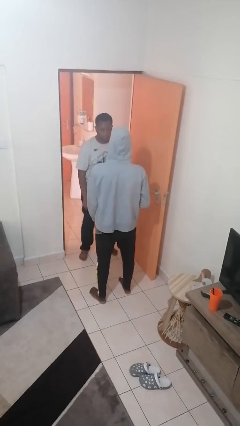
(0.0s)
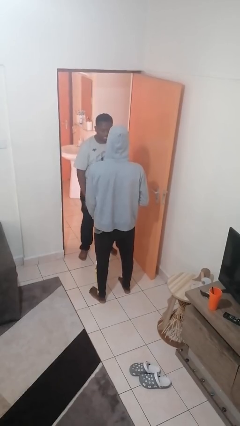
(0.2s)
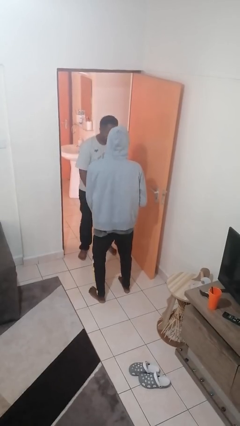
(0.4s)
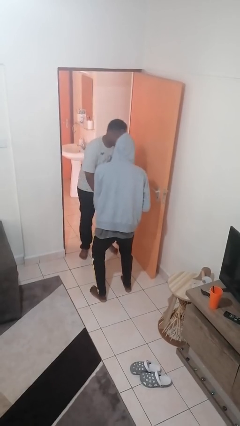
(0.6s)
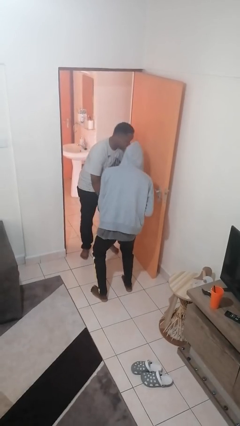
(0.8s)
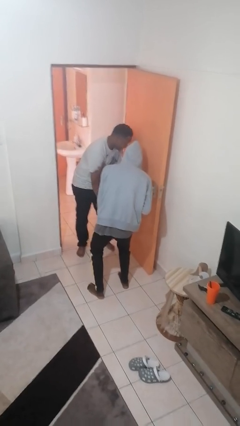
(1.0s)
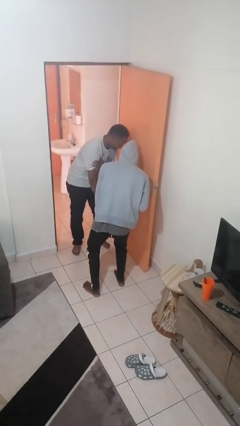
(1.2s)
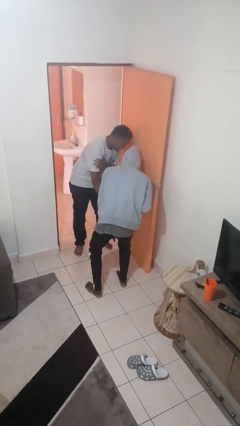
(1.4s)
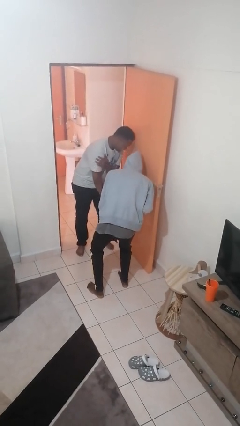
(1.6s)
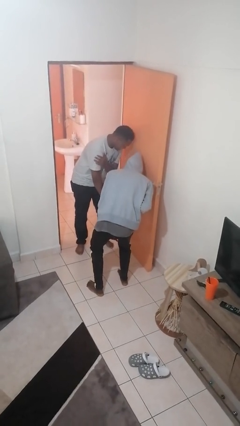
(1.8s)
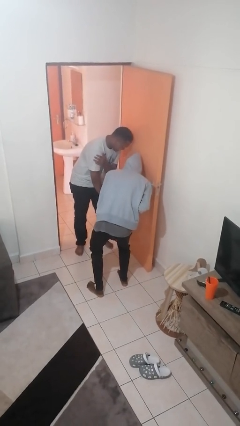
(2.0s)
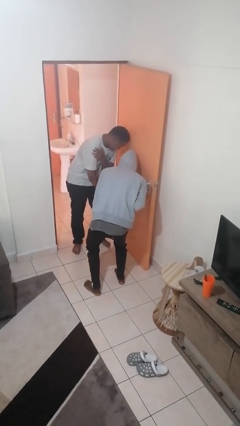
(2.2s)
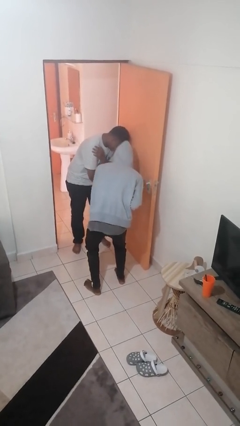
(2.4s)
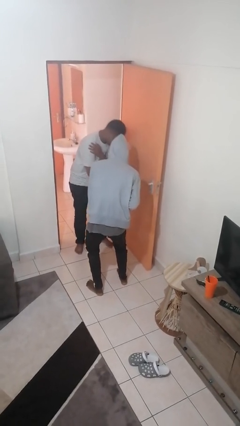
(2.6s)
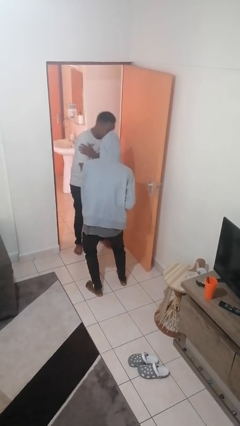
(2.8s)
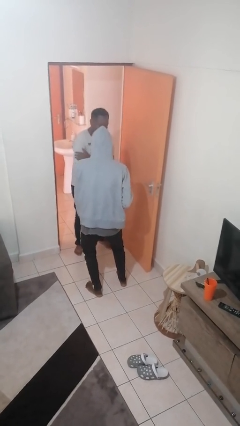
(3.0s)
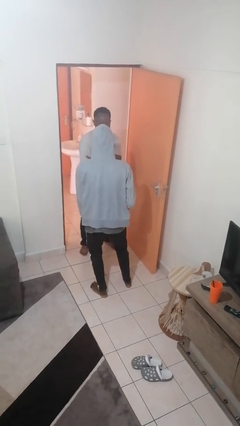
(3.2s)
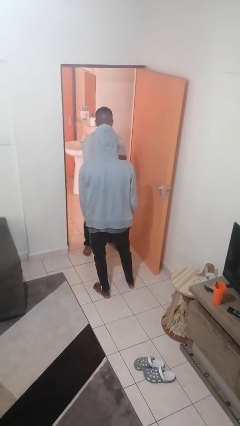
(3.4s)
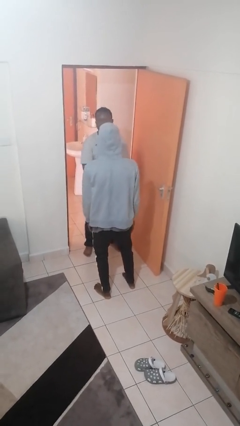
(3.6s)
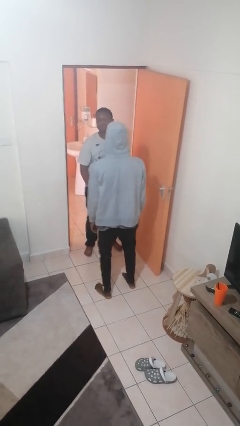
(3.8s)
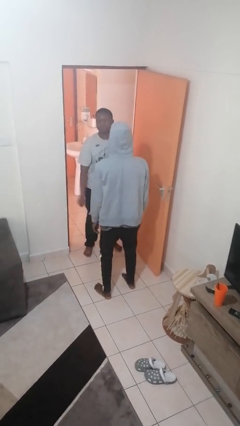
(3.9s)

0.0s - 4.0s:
person laughs with person

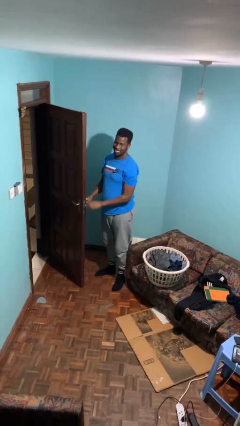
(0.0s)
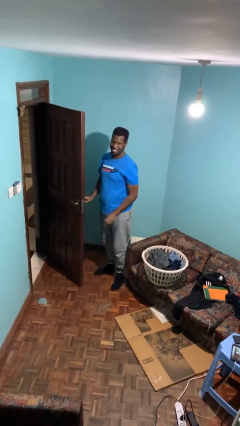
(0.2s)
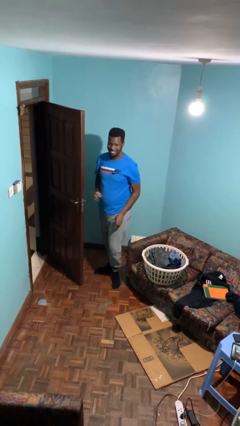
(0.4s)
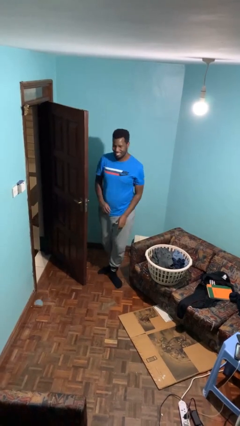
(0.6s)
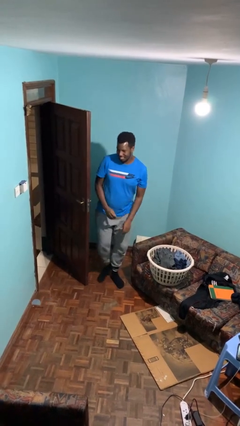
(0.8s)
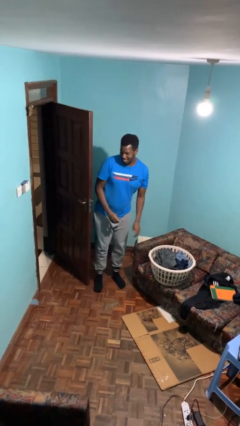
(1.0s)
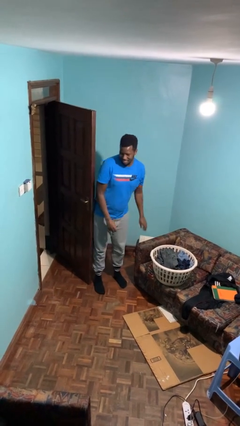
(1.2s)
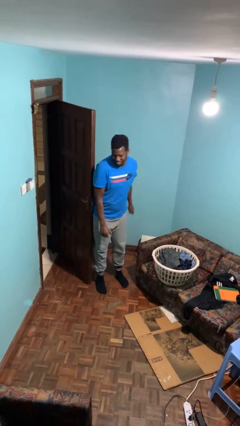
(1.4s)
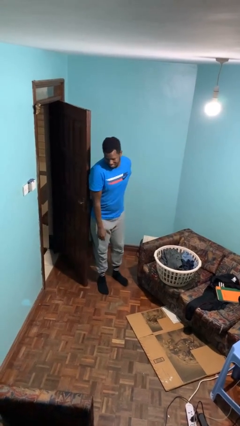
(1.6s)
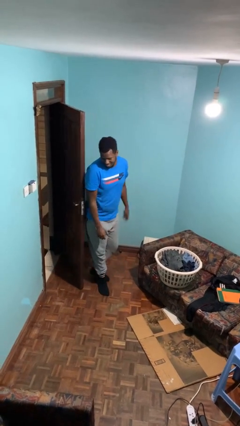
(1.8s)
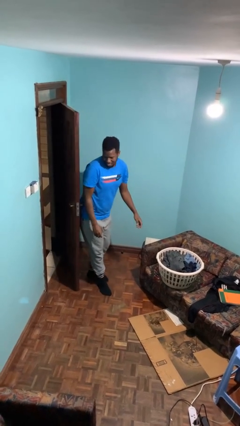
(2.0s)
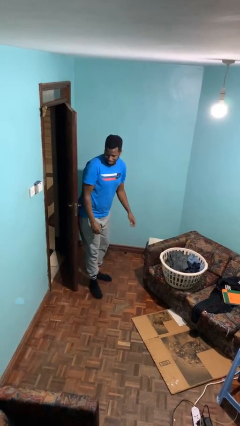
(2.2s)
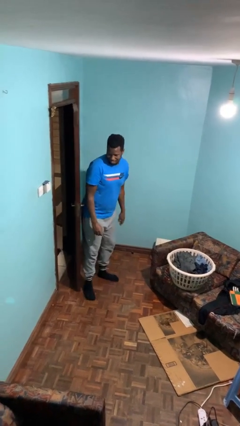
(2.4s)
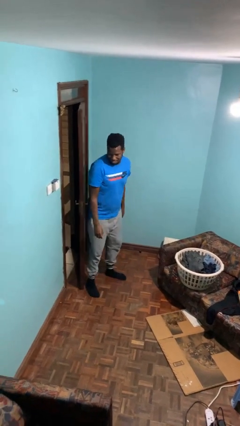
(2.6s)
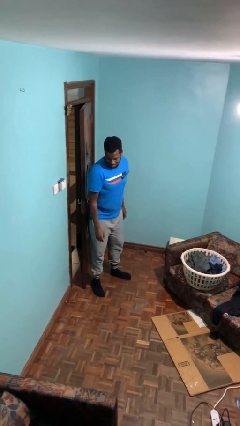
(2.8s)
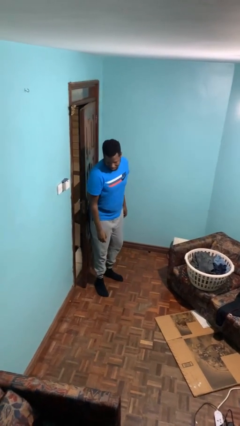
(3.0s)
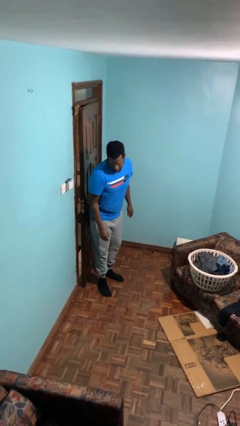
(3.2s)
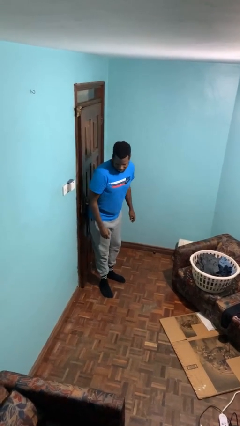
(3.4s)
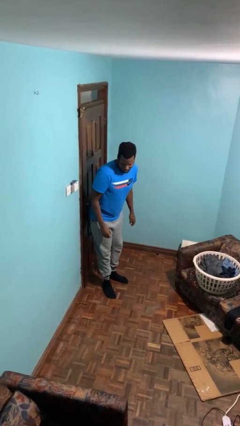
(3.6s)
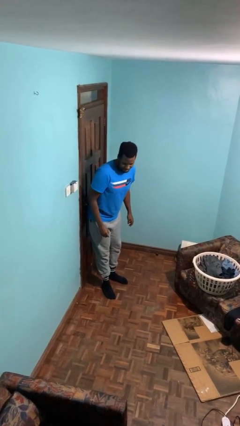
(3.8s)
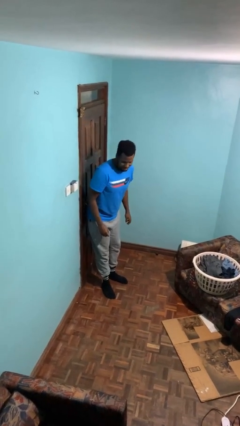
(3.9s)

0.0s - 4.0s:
person closes door with hip

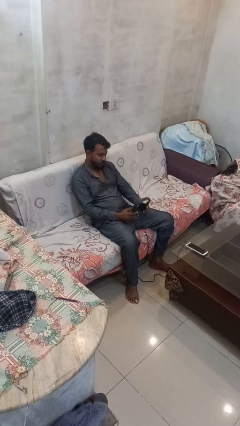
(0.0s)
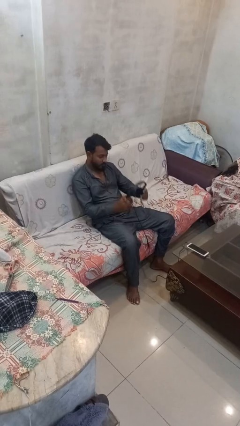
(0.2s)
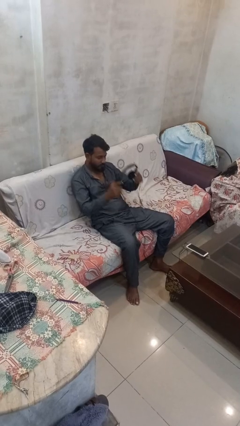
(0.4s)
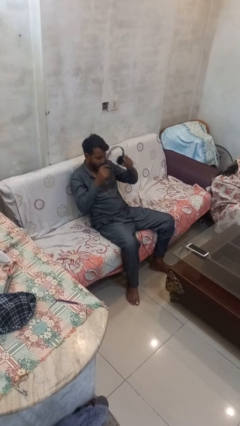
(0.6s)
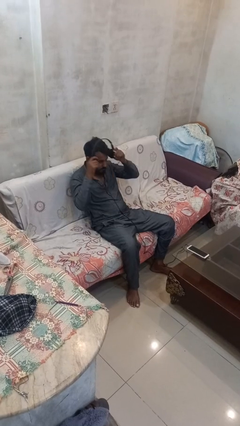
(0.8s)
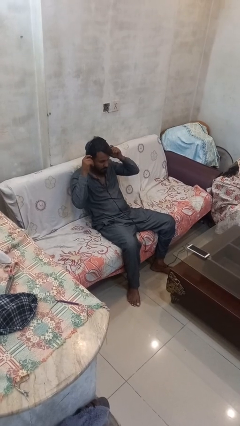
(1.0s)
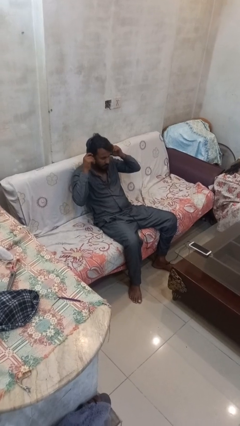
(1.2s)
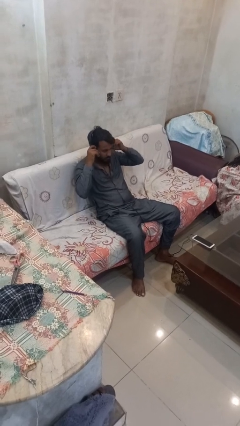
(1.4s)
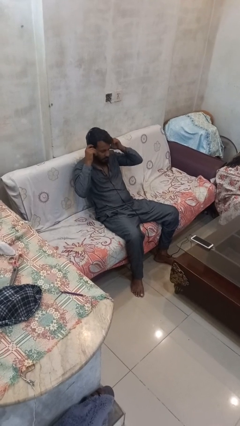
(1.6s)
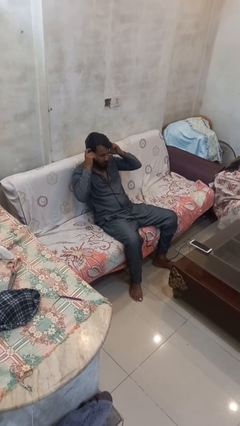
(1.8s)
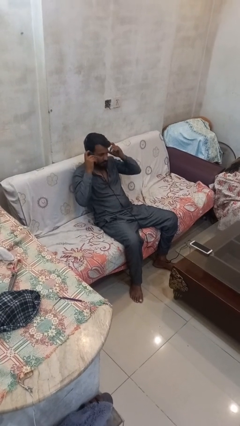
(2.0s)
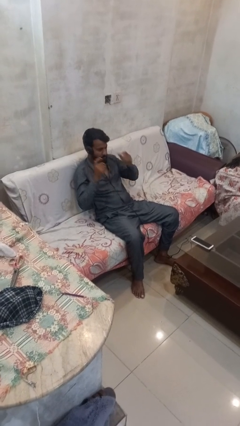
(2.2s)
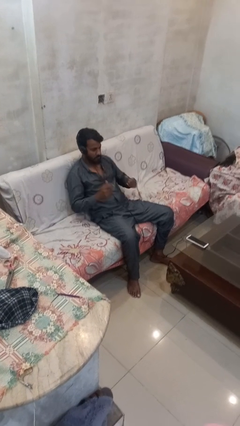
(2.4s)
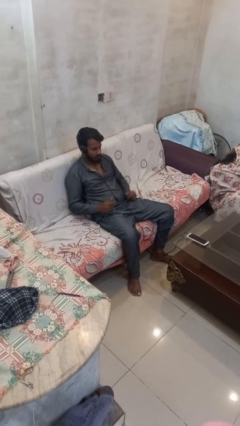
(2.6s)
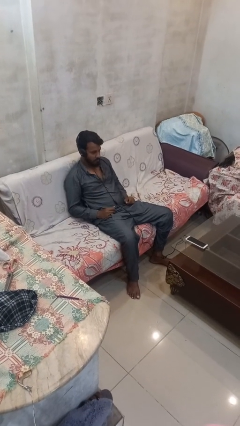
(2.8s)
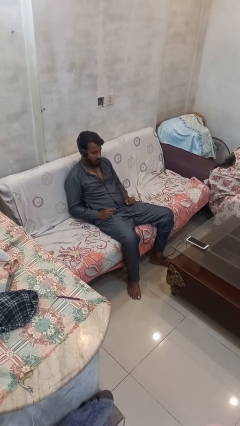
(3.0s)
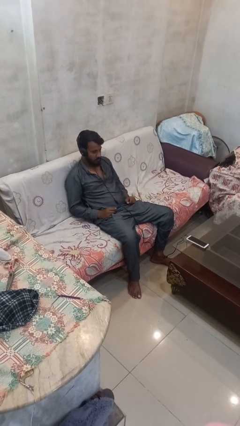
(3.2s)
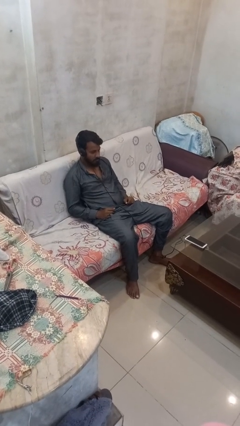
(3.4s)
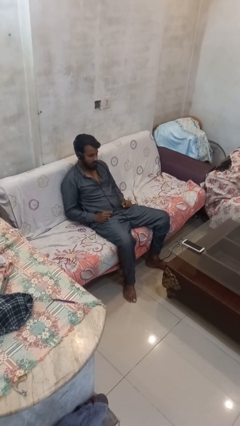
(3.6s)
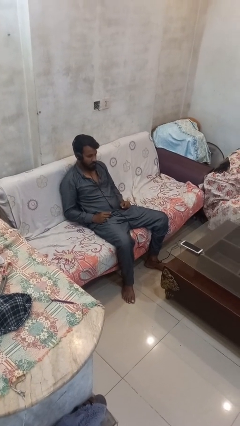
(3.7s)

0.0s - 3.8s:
person puts on headphones

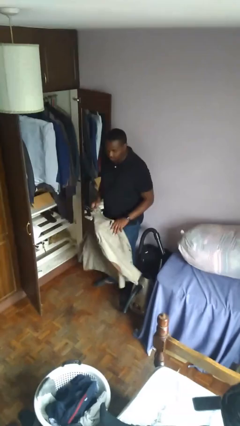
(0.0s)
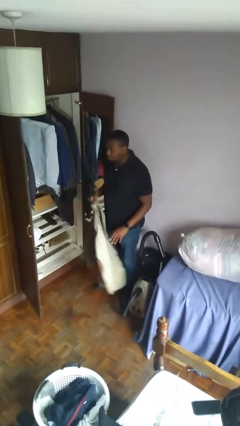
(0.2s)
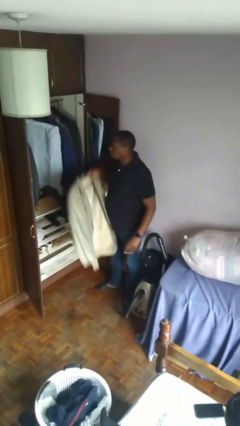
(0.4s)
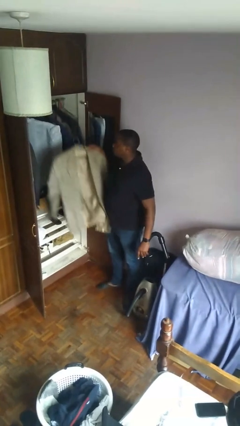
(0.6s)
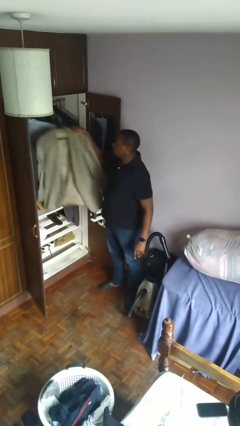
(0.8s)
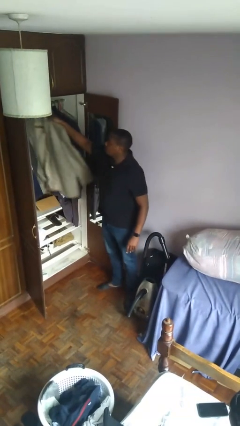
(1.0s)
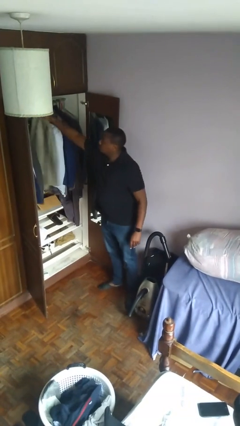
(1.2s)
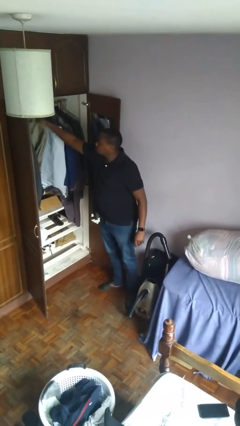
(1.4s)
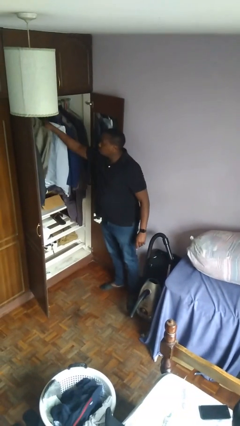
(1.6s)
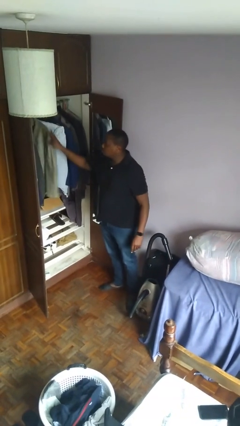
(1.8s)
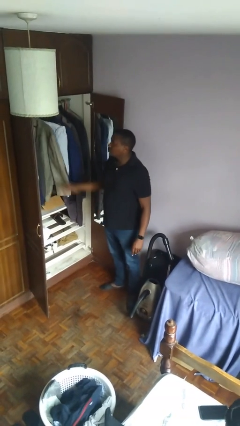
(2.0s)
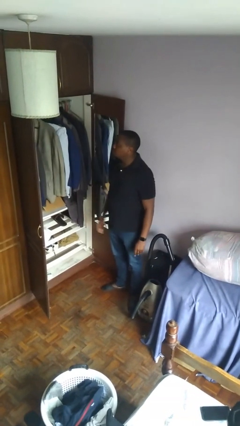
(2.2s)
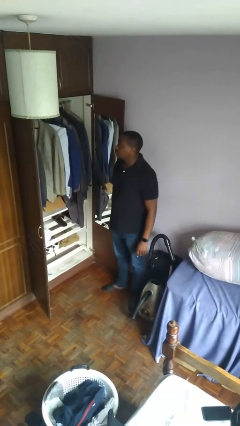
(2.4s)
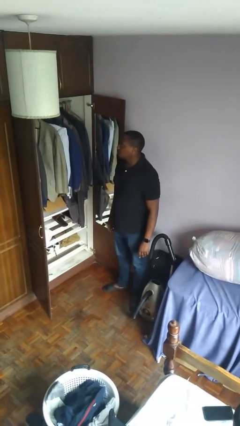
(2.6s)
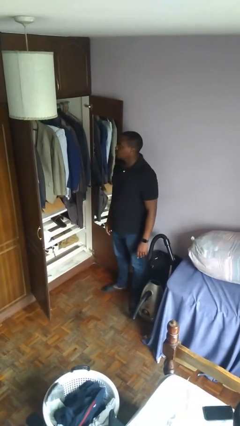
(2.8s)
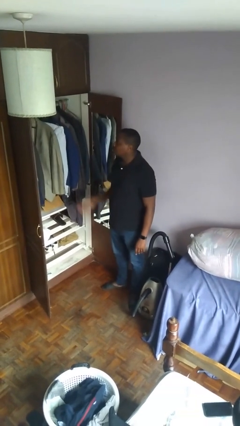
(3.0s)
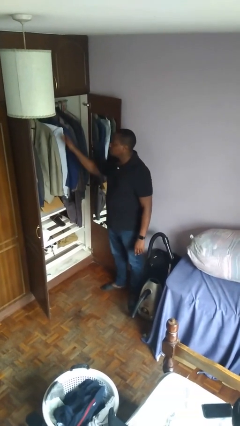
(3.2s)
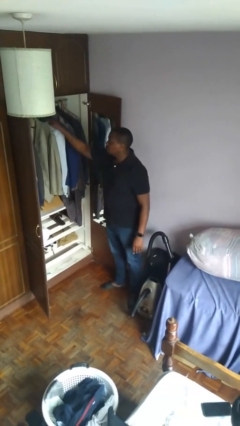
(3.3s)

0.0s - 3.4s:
person puts clothes into closet

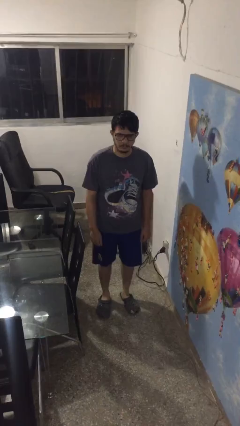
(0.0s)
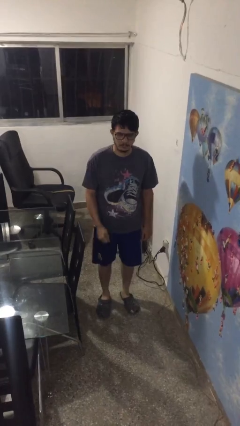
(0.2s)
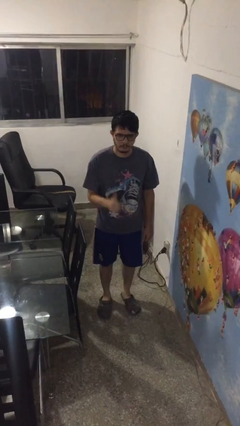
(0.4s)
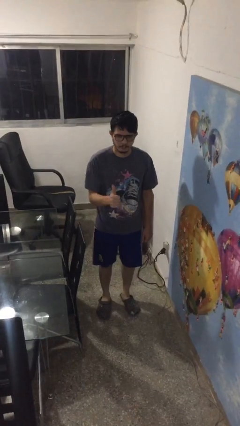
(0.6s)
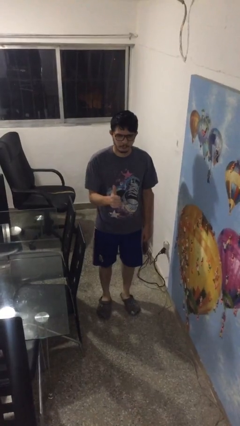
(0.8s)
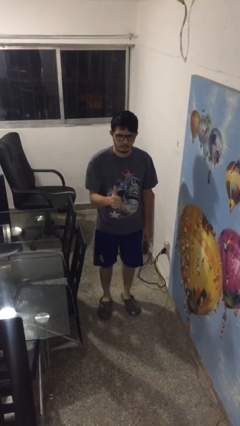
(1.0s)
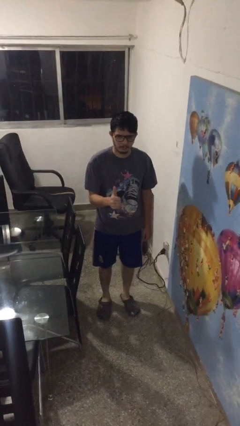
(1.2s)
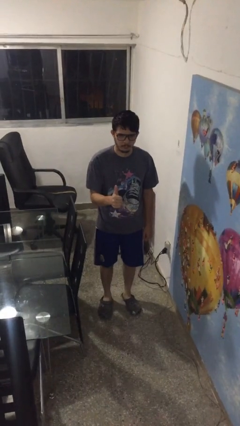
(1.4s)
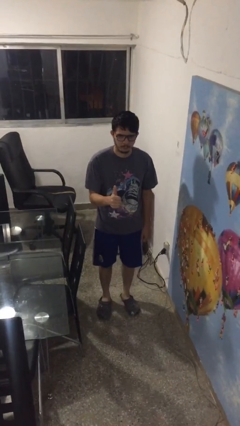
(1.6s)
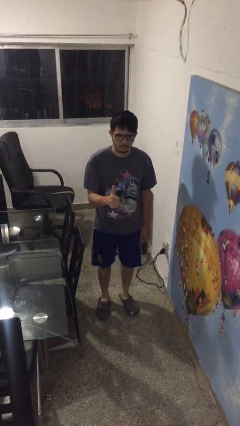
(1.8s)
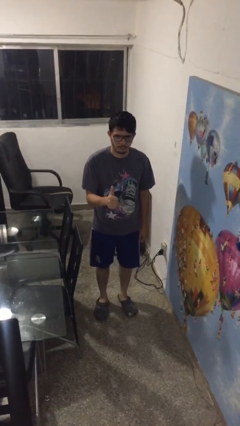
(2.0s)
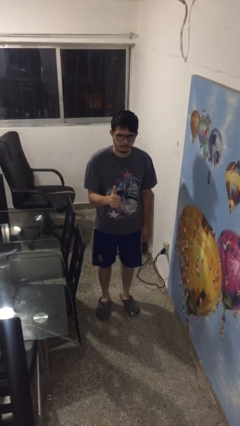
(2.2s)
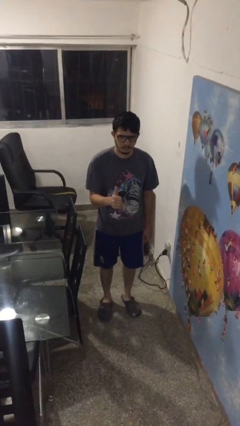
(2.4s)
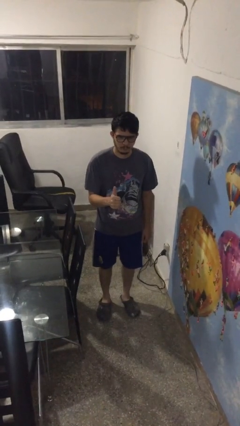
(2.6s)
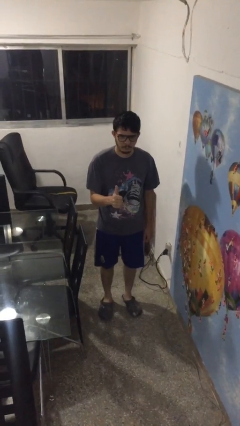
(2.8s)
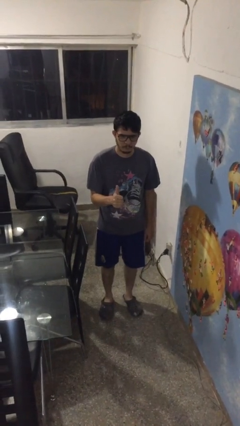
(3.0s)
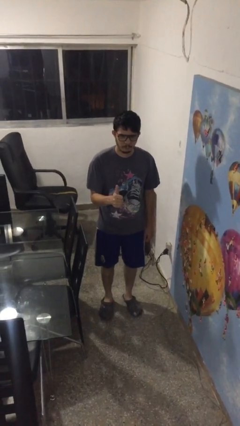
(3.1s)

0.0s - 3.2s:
person gestures thumbs up
